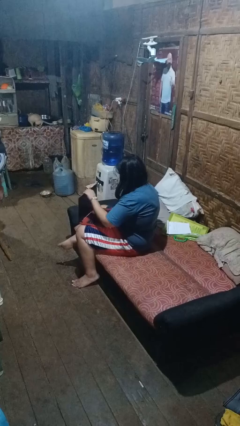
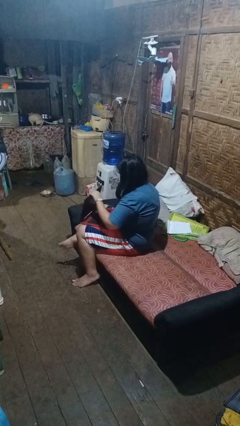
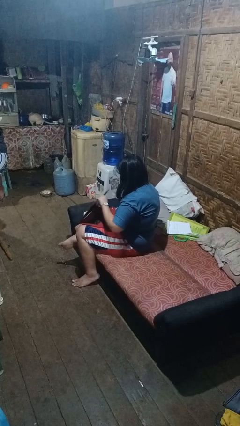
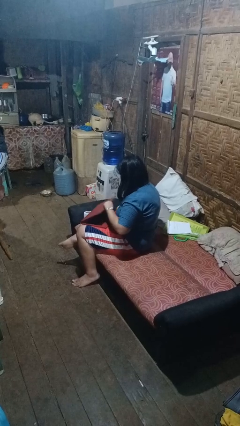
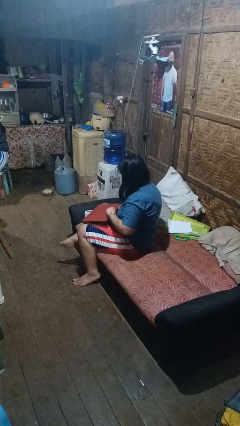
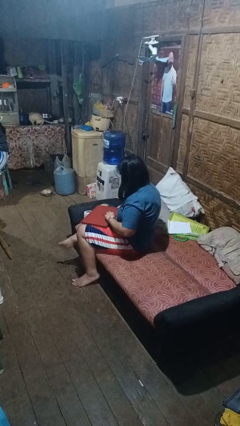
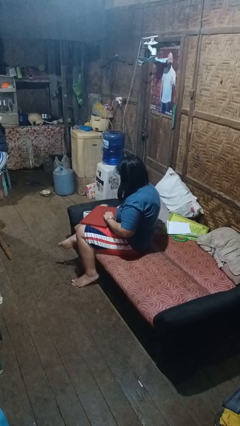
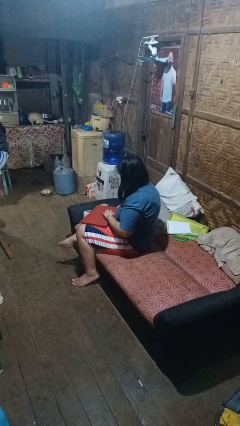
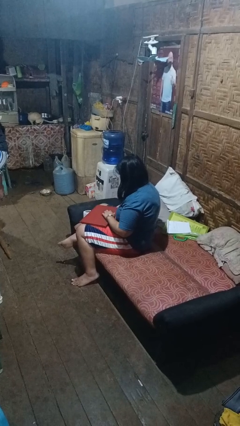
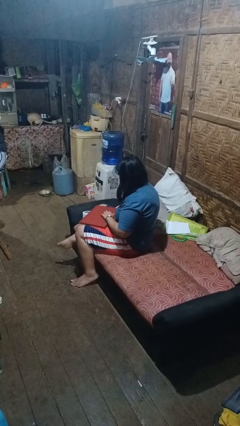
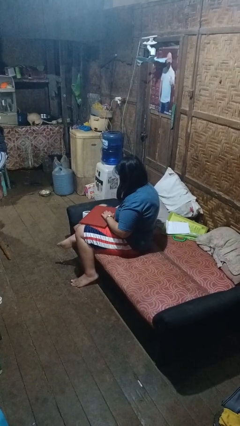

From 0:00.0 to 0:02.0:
person closes laptop

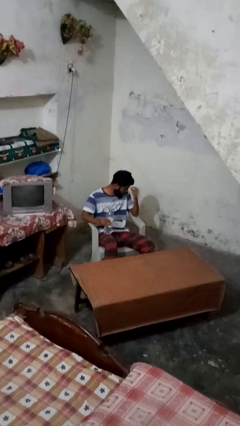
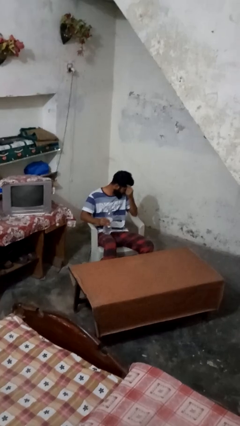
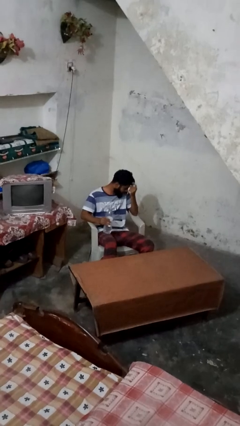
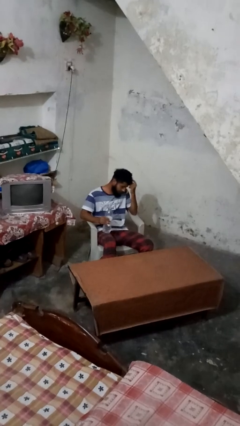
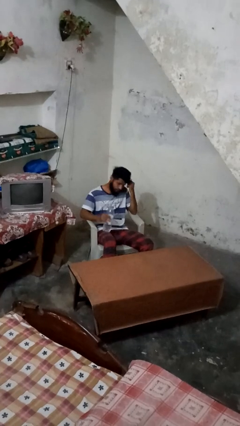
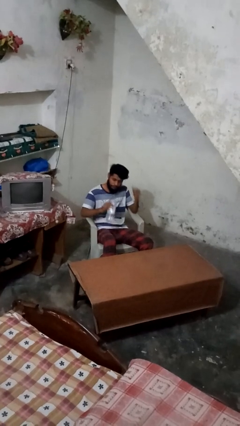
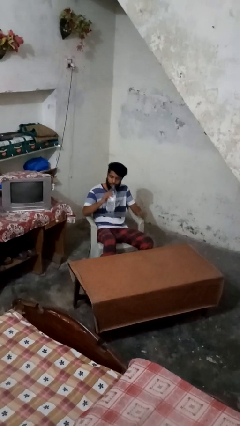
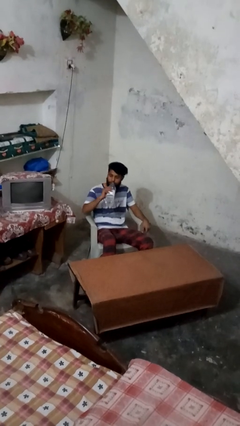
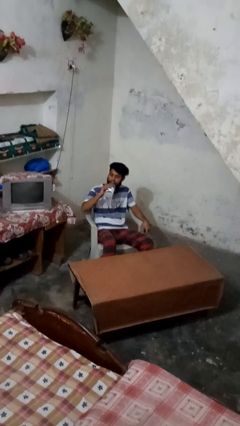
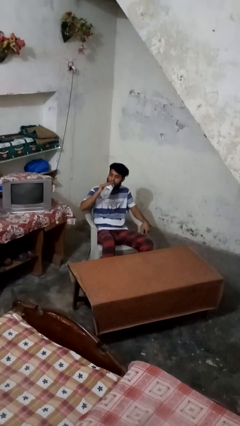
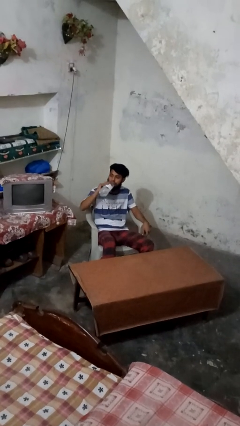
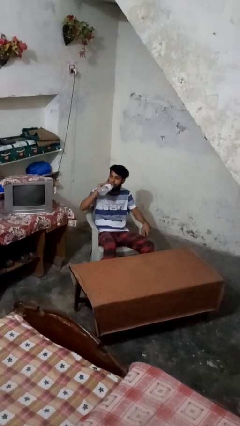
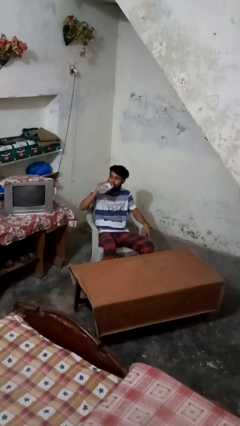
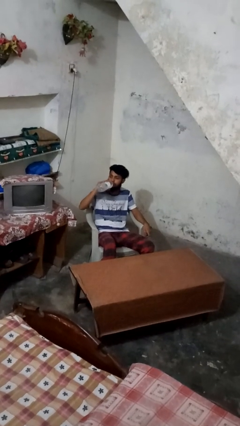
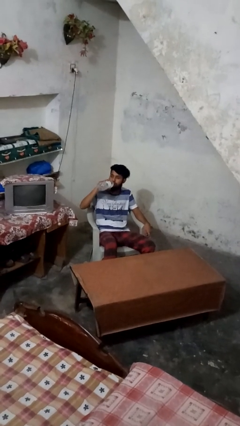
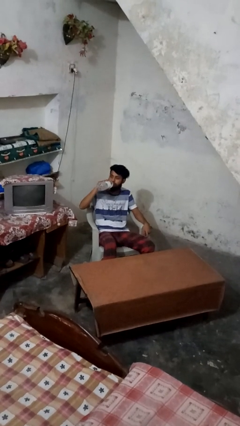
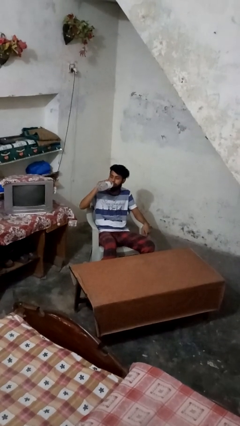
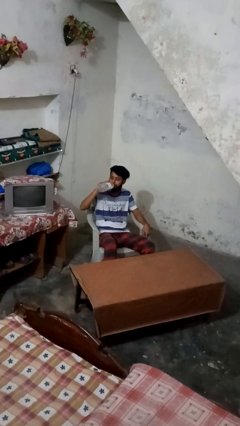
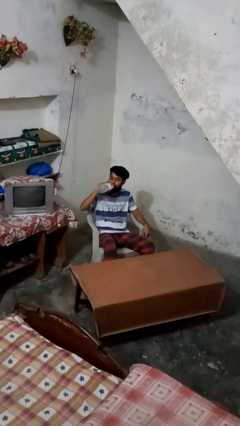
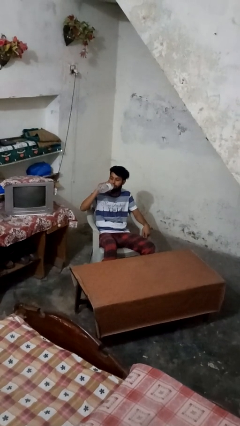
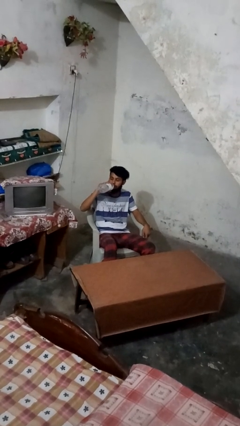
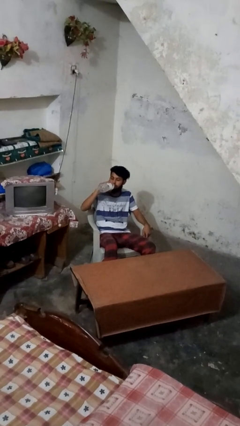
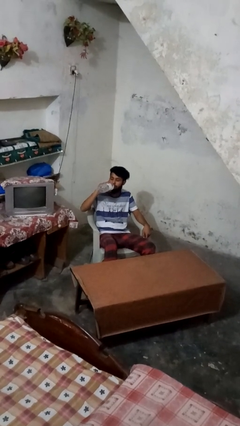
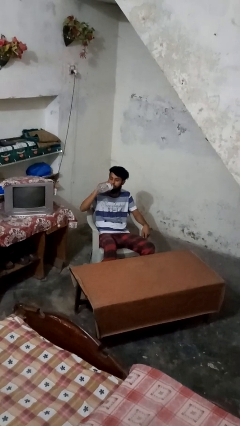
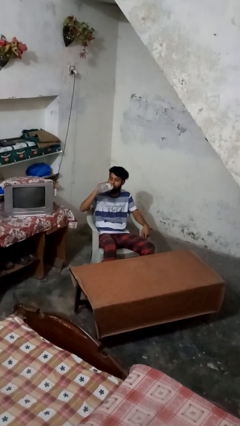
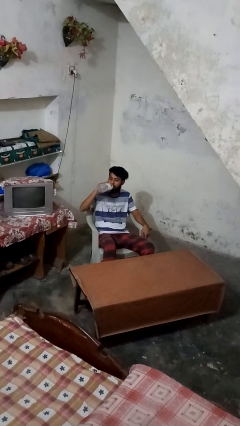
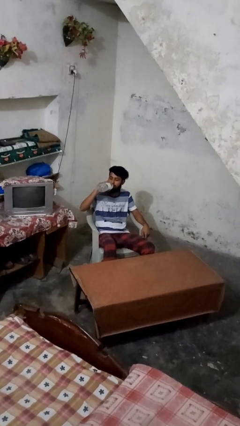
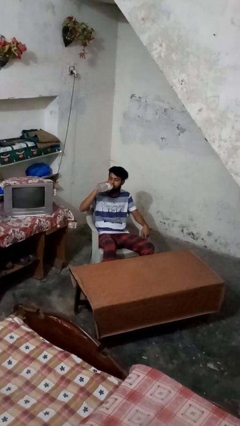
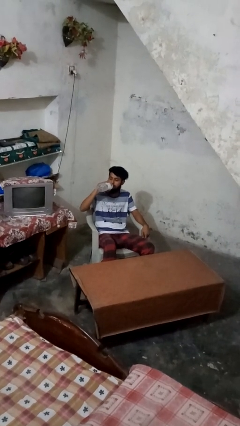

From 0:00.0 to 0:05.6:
person drinks from bottle

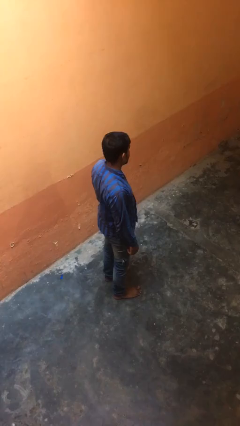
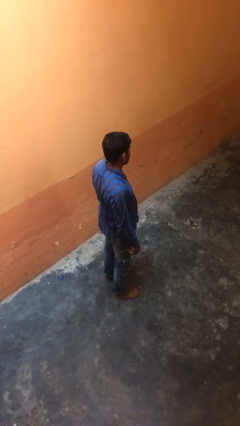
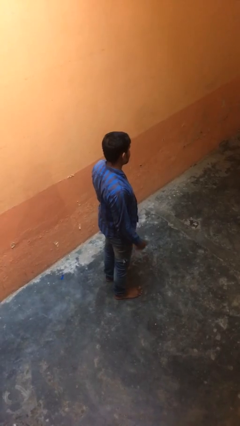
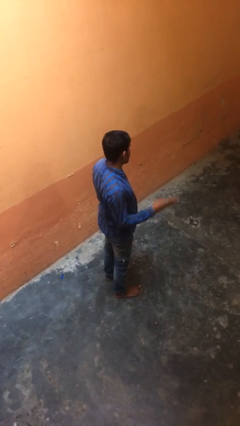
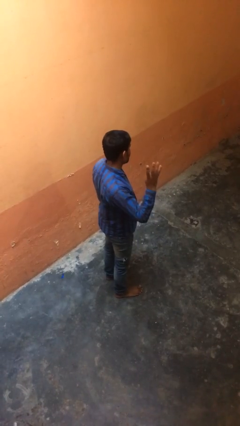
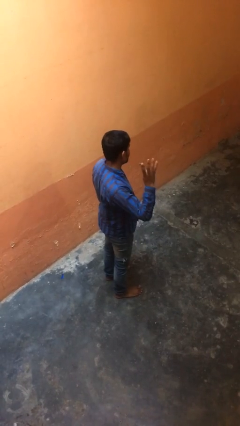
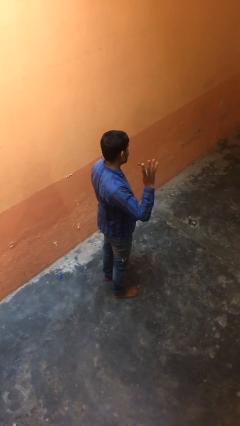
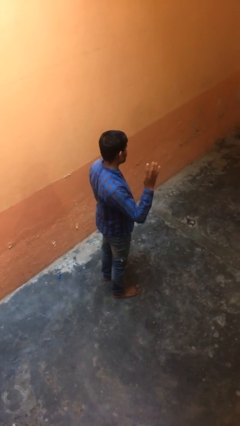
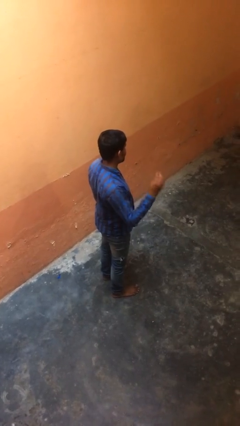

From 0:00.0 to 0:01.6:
person gestures number four

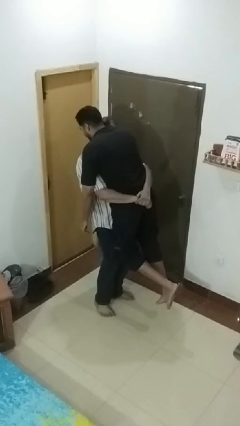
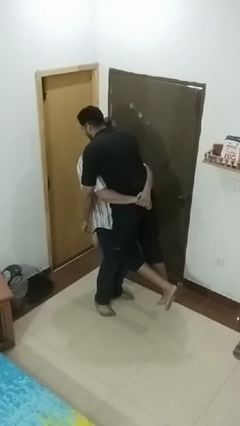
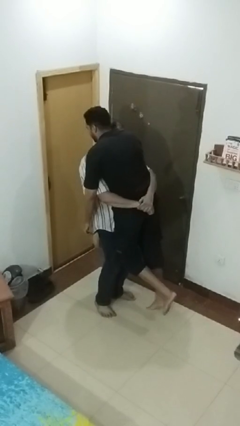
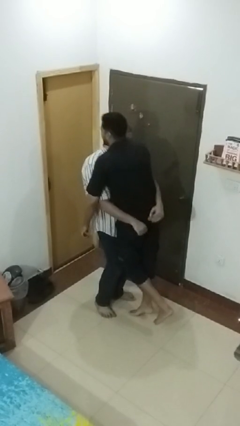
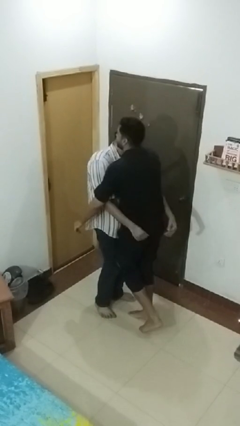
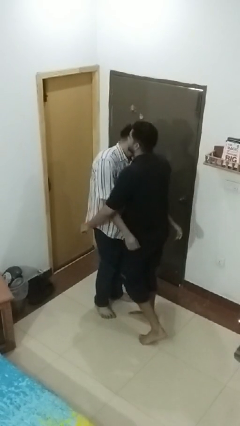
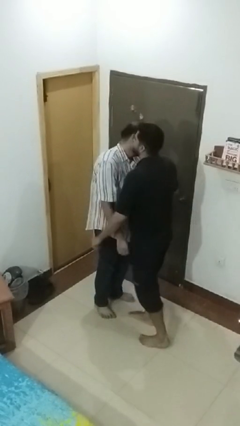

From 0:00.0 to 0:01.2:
person puts down person

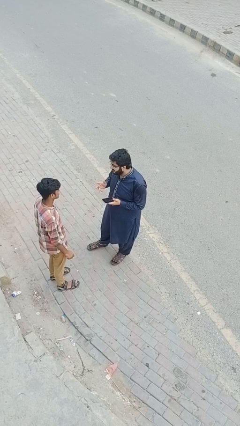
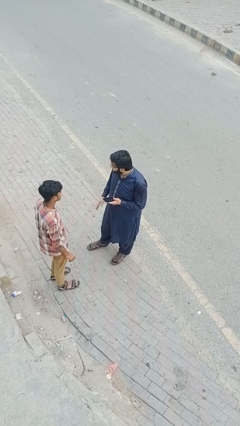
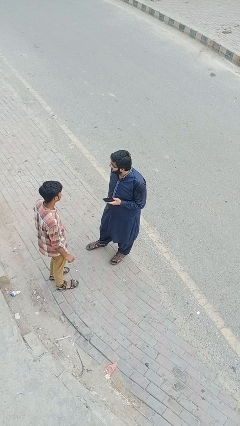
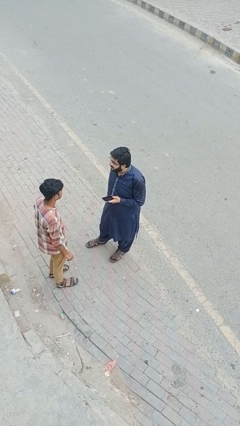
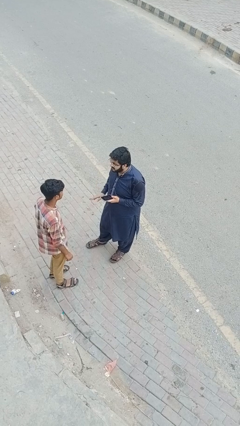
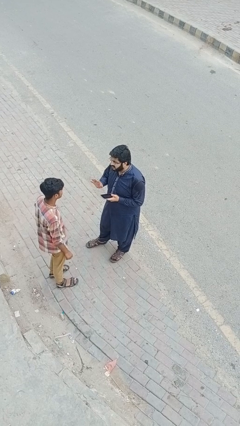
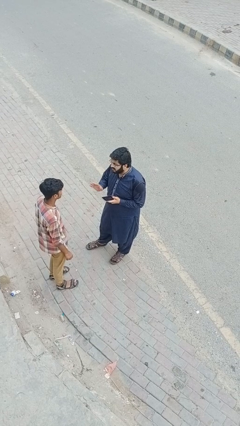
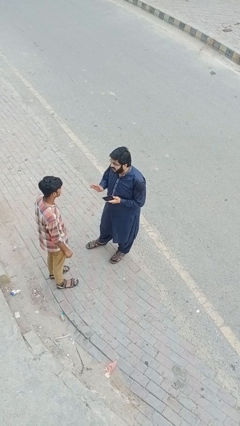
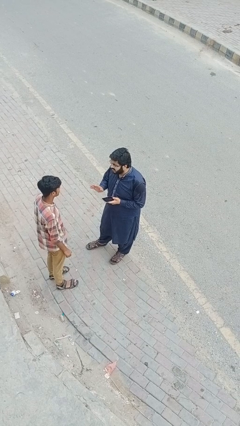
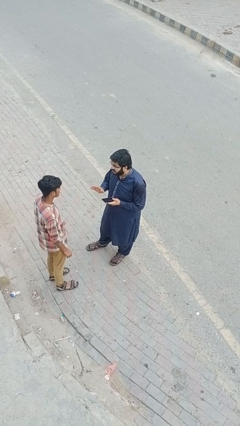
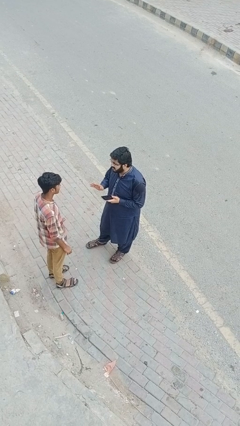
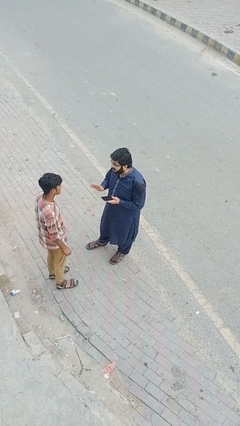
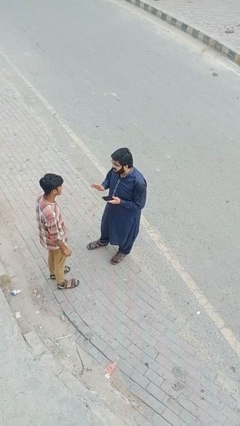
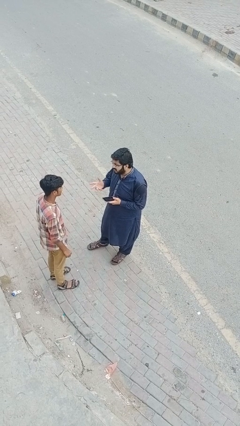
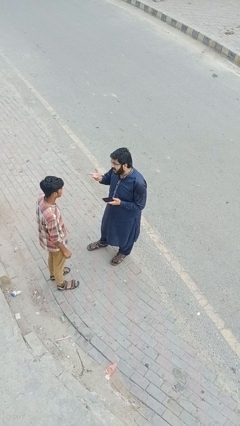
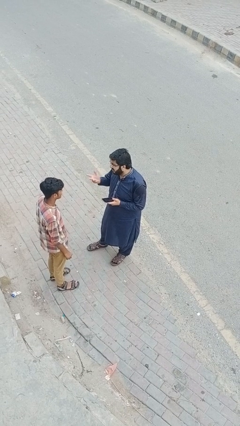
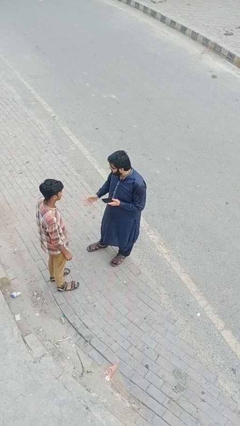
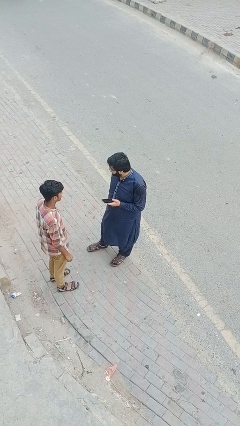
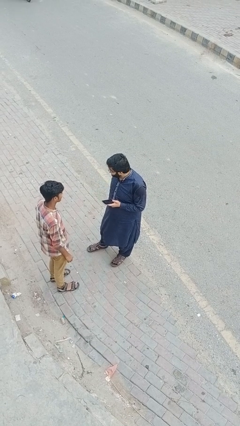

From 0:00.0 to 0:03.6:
person talks to person

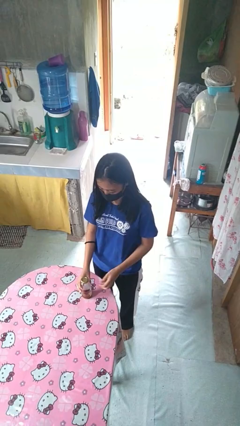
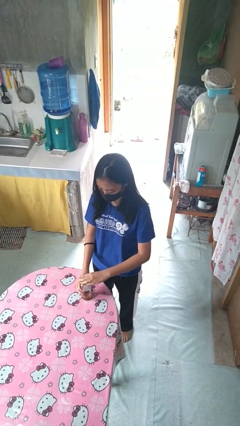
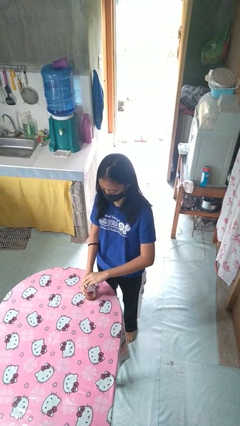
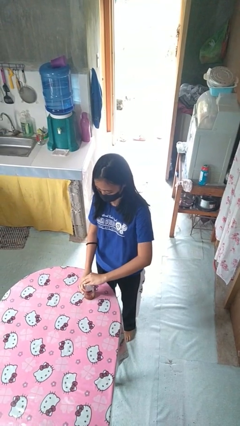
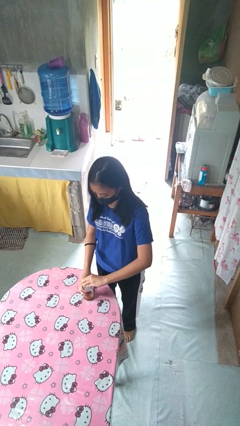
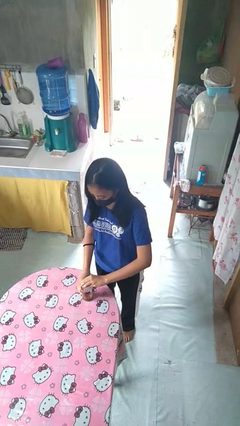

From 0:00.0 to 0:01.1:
person opens jar

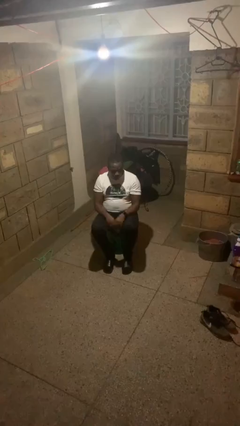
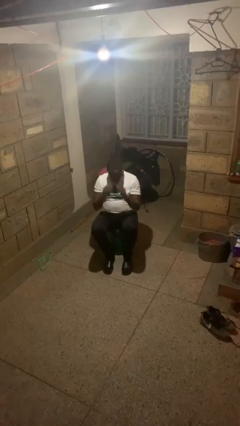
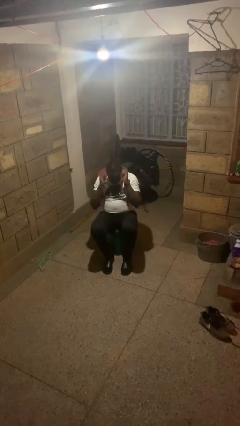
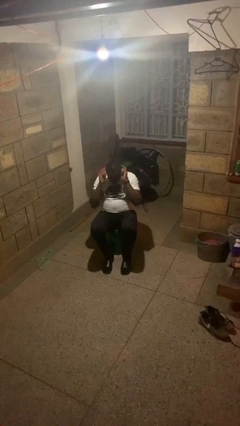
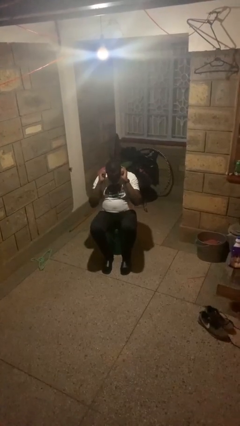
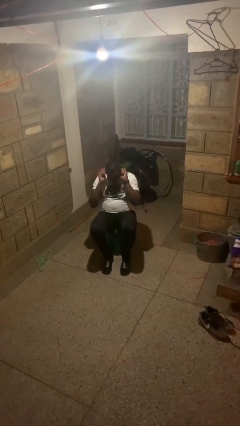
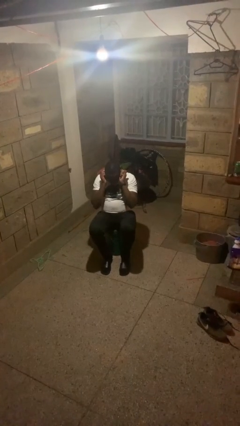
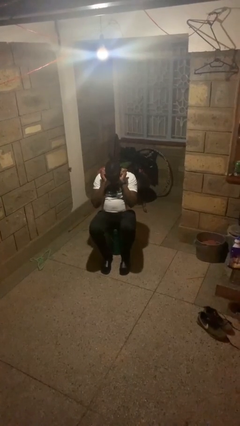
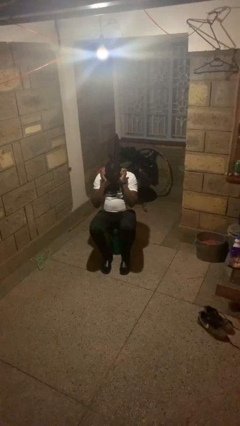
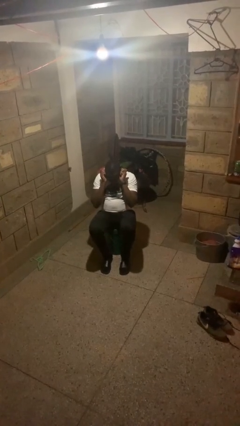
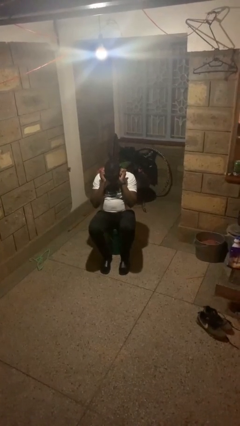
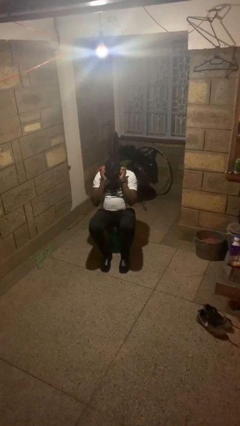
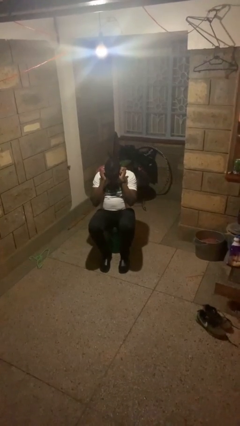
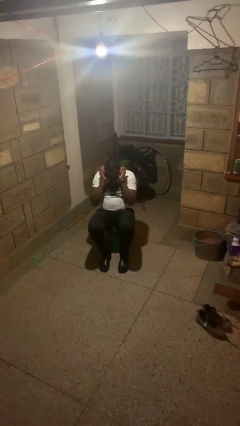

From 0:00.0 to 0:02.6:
person touches earlobe
